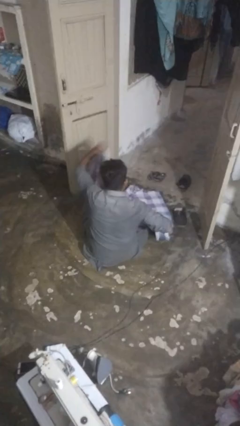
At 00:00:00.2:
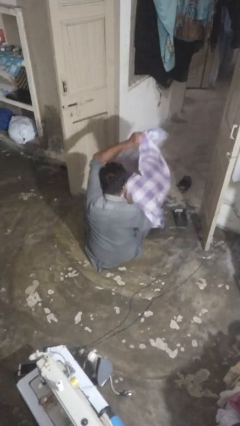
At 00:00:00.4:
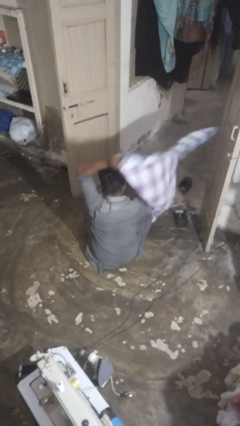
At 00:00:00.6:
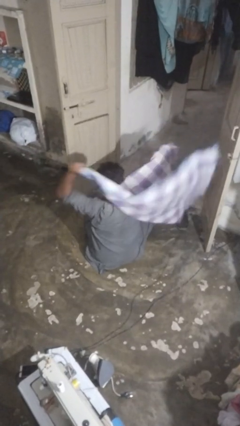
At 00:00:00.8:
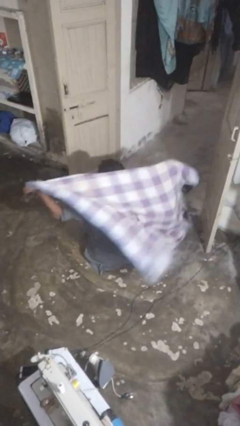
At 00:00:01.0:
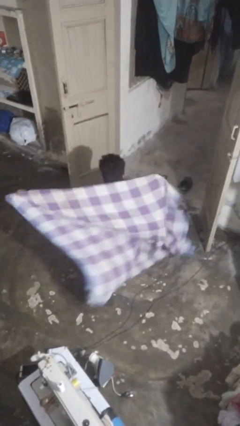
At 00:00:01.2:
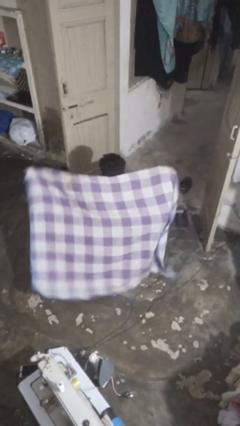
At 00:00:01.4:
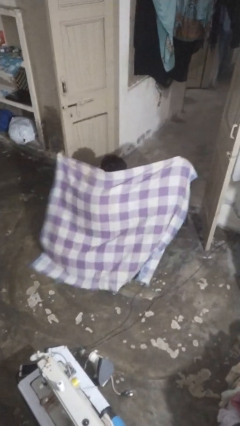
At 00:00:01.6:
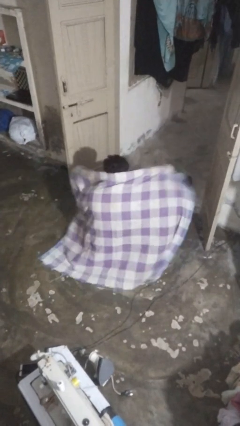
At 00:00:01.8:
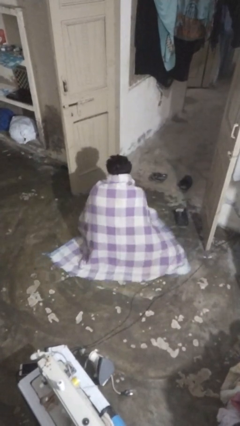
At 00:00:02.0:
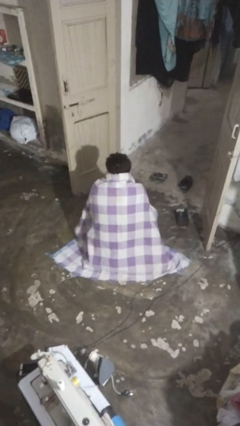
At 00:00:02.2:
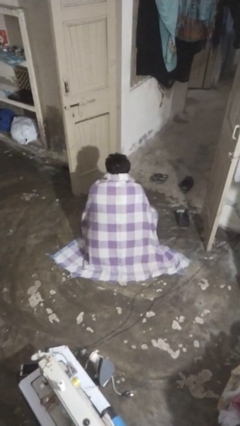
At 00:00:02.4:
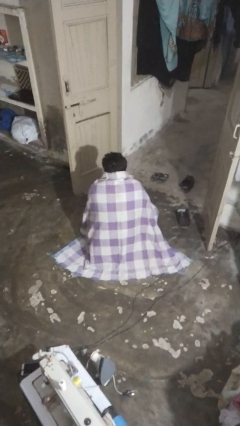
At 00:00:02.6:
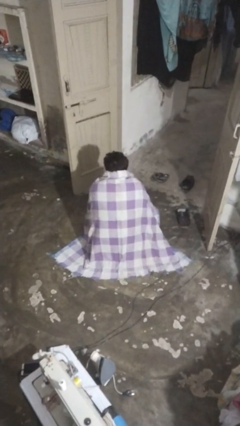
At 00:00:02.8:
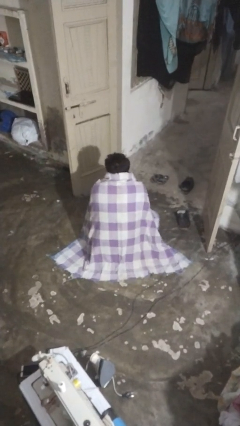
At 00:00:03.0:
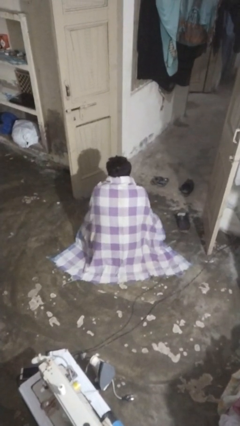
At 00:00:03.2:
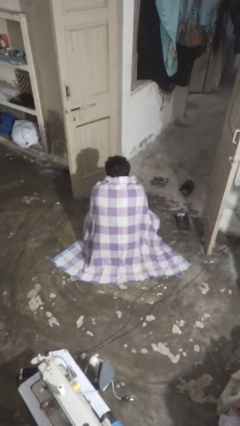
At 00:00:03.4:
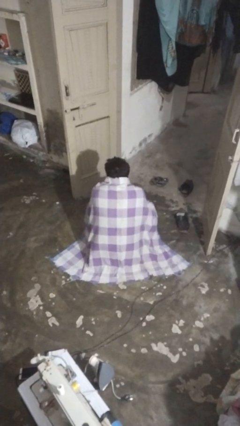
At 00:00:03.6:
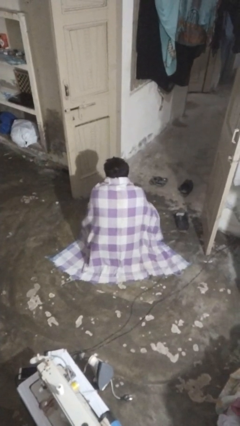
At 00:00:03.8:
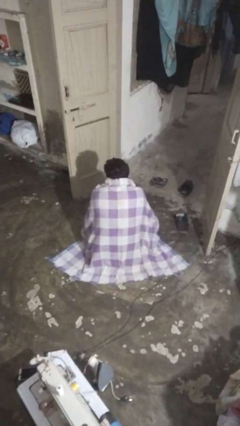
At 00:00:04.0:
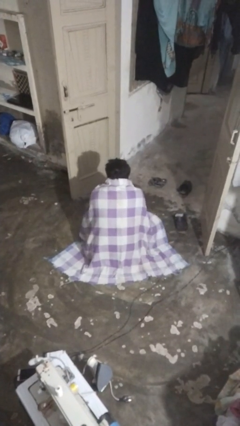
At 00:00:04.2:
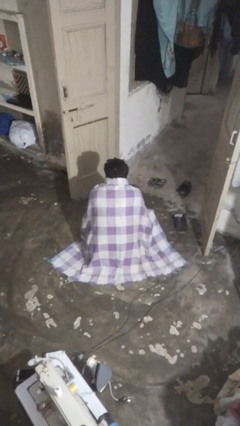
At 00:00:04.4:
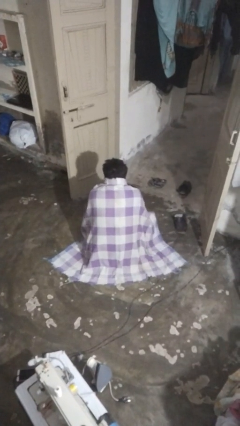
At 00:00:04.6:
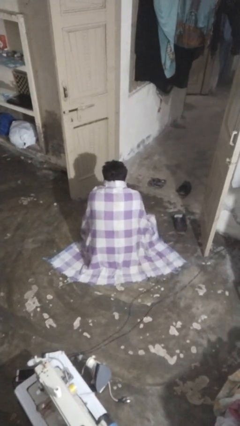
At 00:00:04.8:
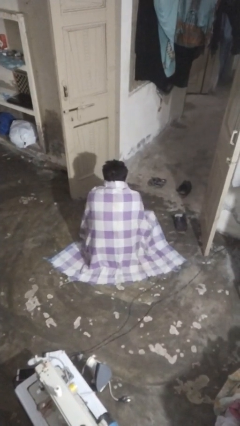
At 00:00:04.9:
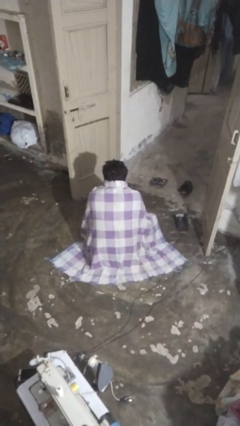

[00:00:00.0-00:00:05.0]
person covers with blanket

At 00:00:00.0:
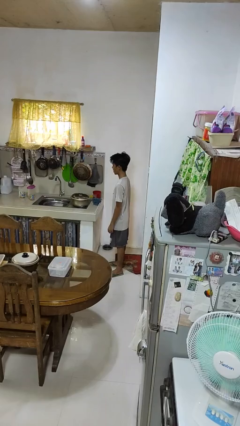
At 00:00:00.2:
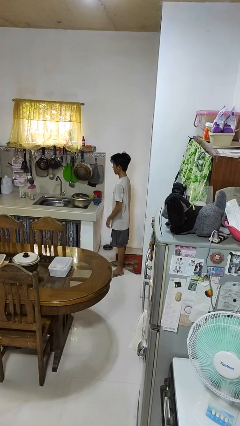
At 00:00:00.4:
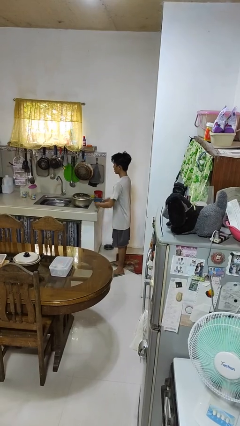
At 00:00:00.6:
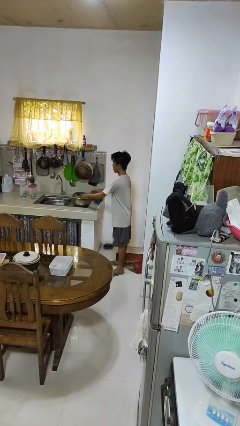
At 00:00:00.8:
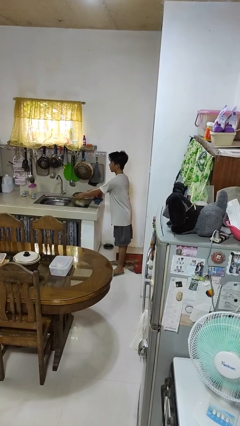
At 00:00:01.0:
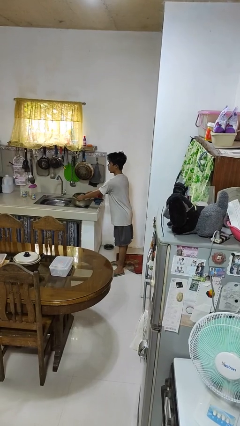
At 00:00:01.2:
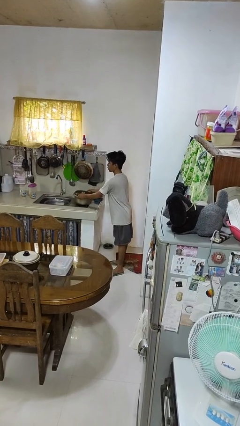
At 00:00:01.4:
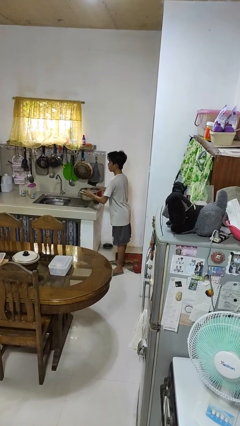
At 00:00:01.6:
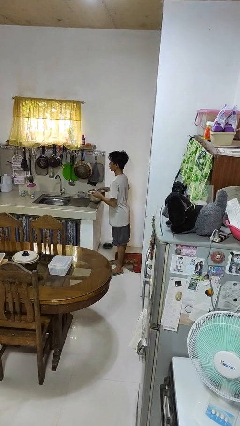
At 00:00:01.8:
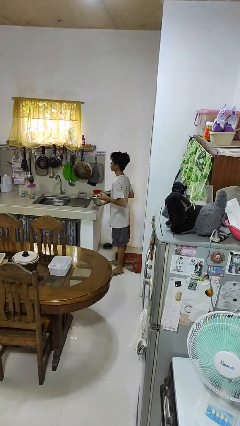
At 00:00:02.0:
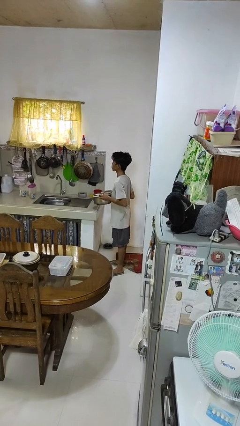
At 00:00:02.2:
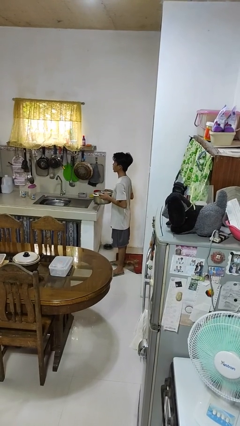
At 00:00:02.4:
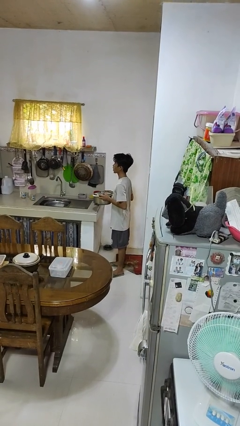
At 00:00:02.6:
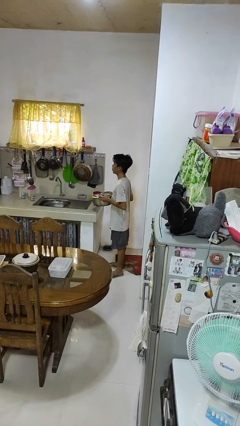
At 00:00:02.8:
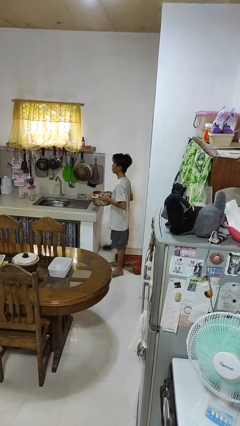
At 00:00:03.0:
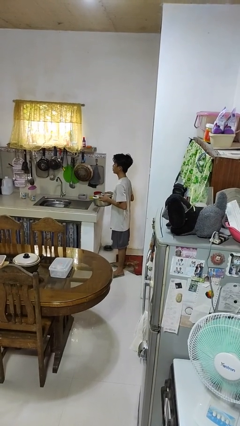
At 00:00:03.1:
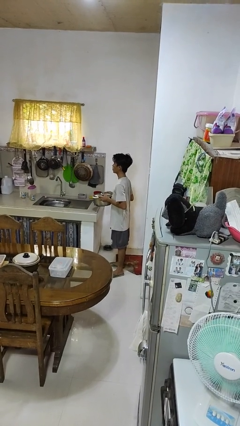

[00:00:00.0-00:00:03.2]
person picks up object from countertop

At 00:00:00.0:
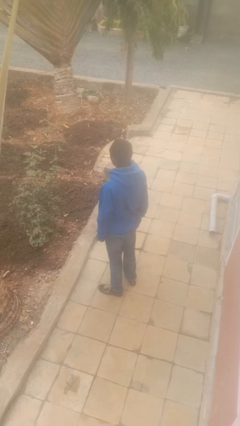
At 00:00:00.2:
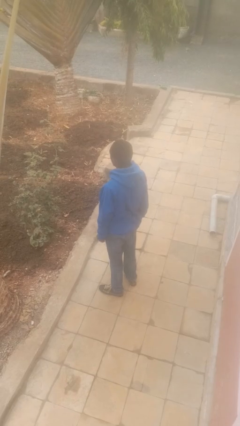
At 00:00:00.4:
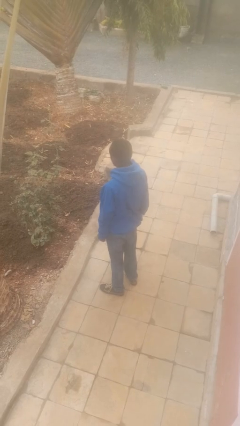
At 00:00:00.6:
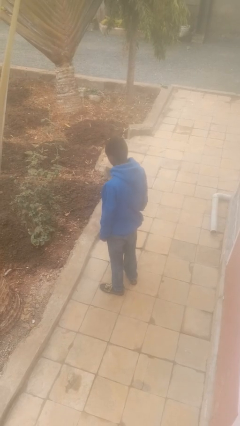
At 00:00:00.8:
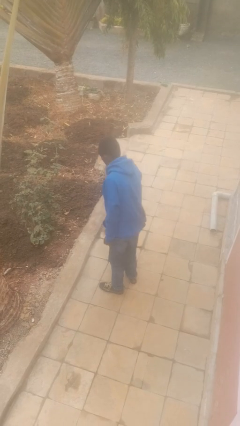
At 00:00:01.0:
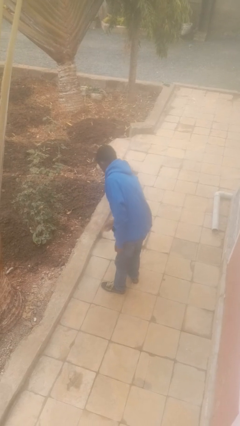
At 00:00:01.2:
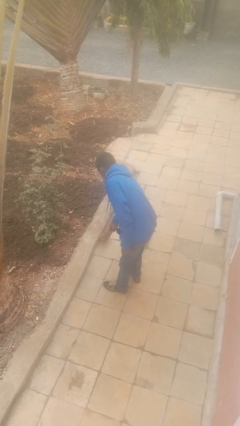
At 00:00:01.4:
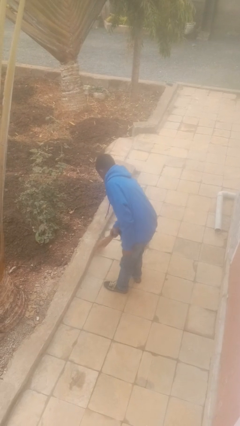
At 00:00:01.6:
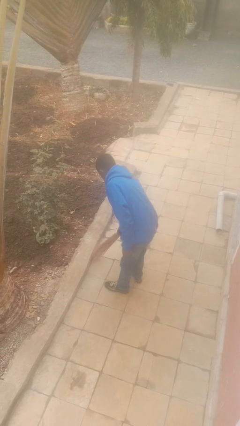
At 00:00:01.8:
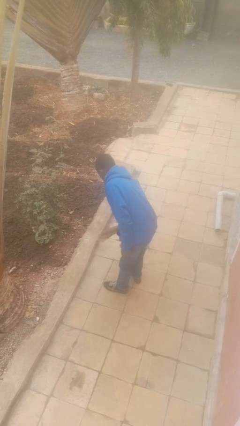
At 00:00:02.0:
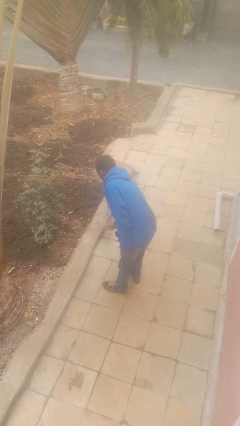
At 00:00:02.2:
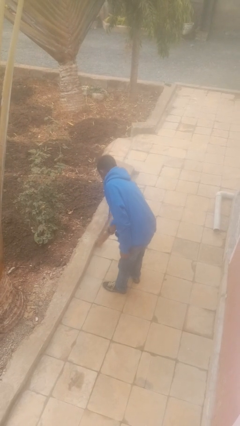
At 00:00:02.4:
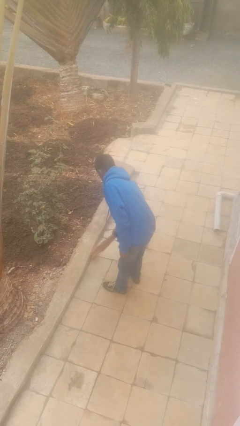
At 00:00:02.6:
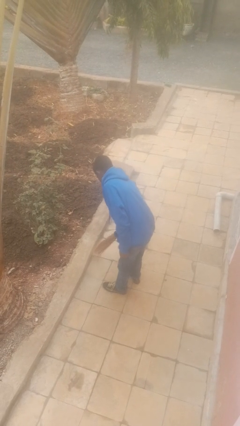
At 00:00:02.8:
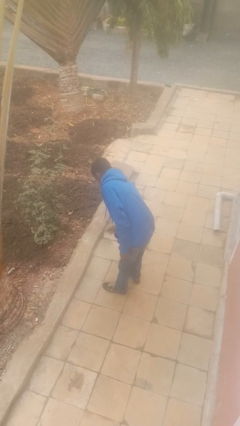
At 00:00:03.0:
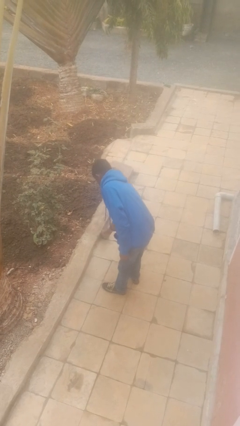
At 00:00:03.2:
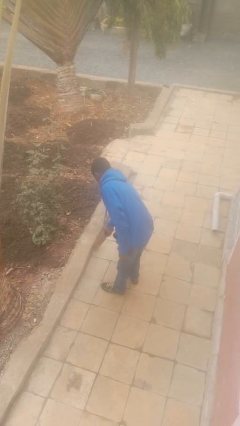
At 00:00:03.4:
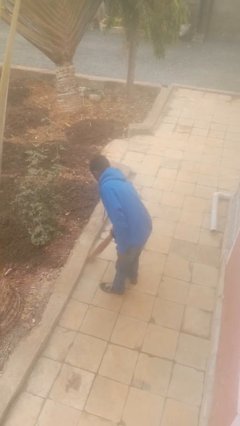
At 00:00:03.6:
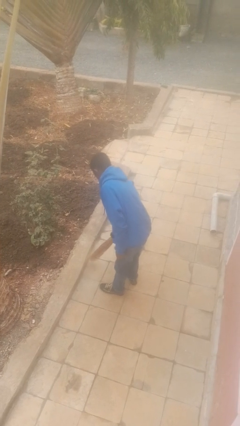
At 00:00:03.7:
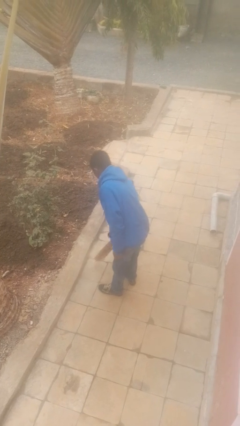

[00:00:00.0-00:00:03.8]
person sweeps floor

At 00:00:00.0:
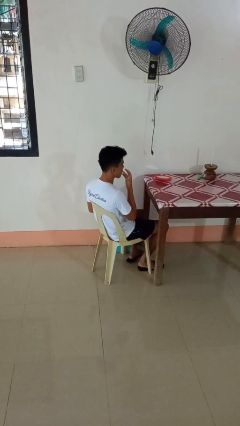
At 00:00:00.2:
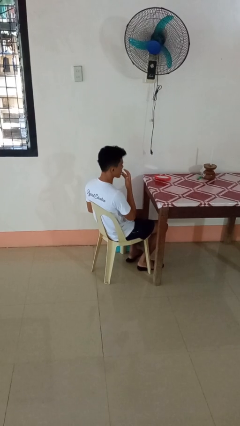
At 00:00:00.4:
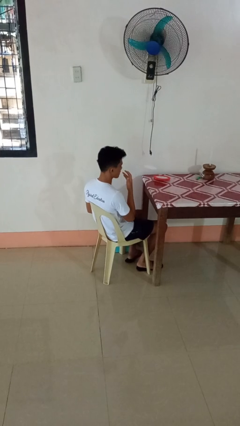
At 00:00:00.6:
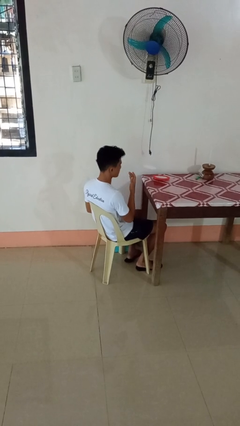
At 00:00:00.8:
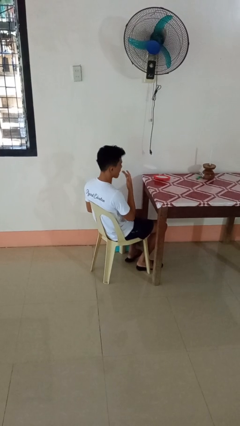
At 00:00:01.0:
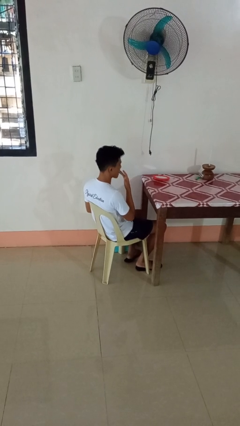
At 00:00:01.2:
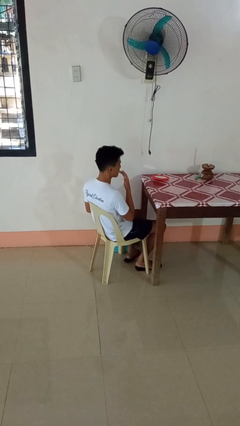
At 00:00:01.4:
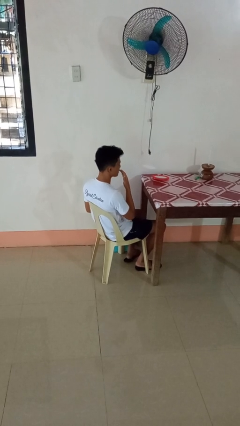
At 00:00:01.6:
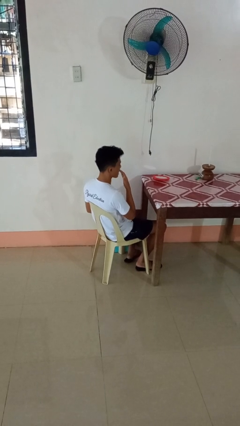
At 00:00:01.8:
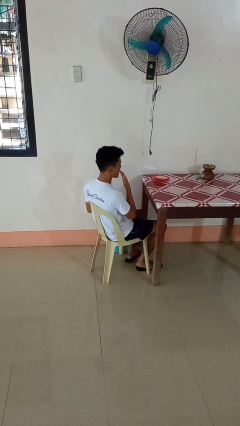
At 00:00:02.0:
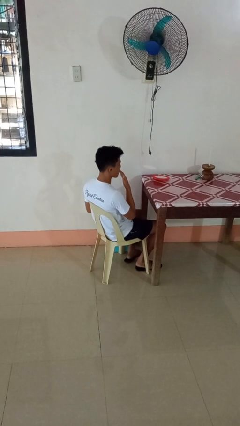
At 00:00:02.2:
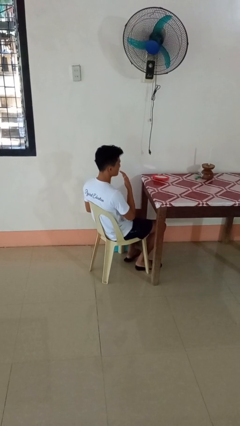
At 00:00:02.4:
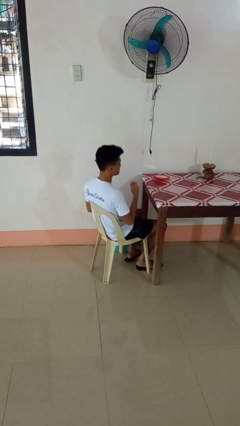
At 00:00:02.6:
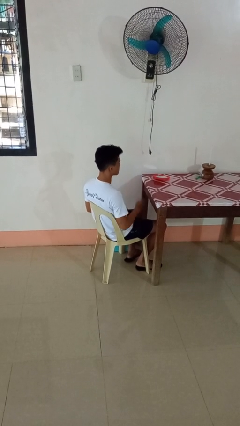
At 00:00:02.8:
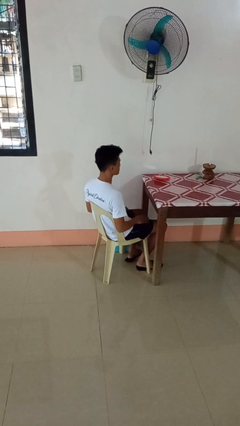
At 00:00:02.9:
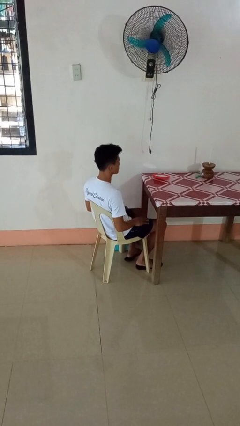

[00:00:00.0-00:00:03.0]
person licks fingers

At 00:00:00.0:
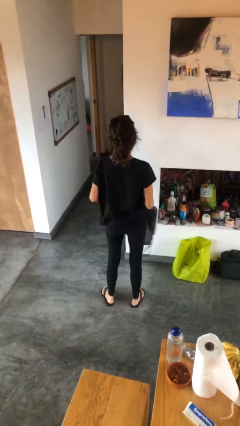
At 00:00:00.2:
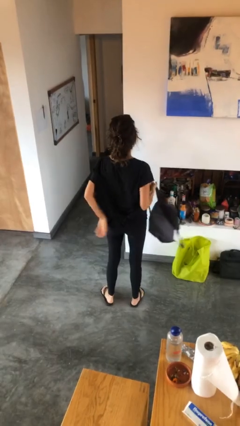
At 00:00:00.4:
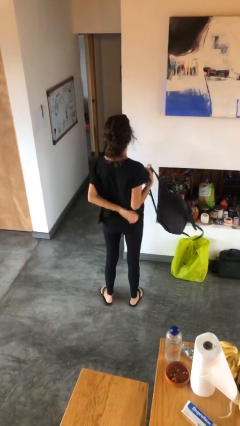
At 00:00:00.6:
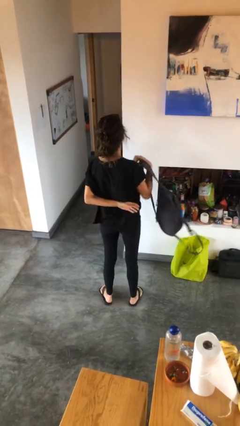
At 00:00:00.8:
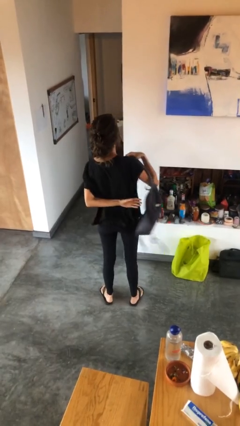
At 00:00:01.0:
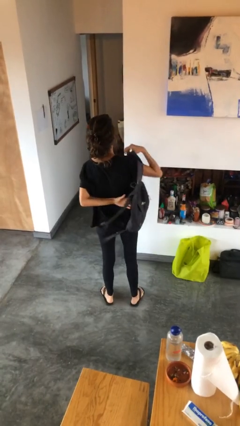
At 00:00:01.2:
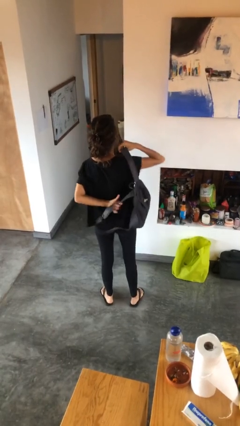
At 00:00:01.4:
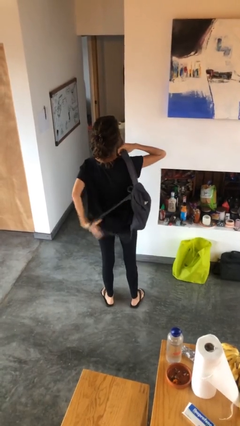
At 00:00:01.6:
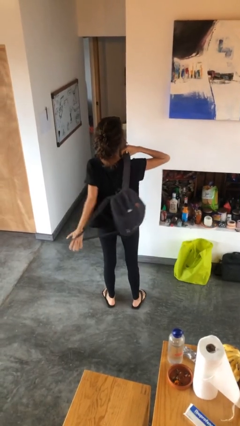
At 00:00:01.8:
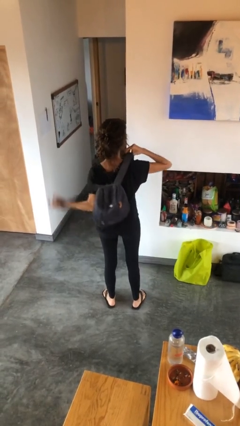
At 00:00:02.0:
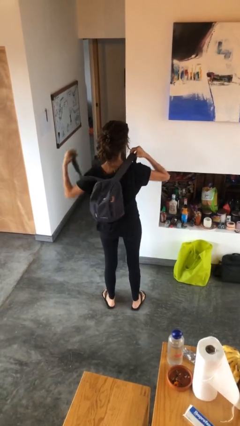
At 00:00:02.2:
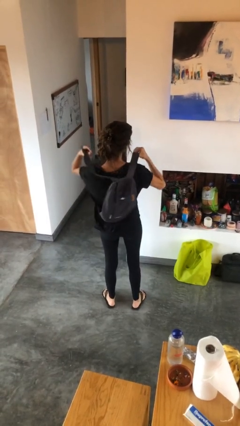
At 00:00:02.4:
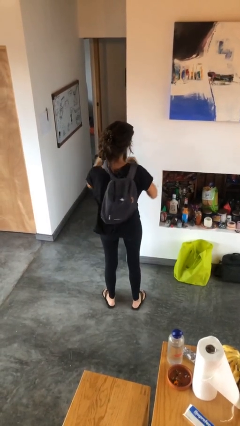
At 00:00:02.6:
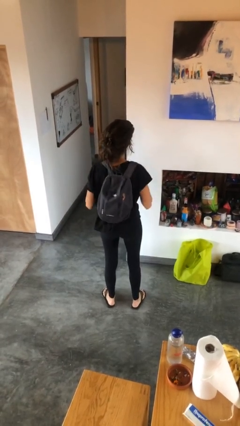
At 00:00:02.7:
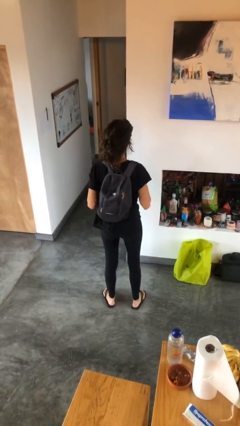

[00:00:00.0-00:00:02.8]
person puts on backpack
